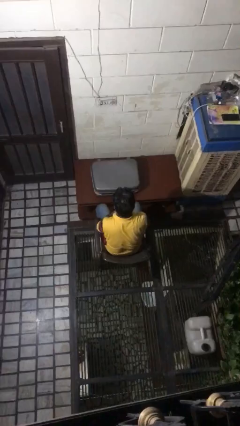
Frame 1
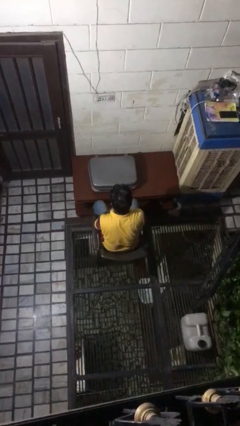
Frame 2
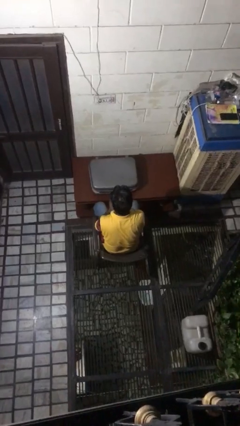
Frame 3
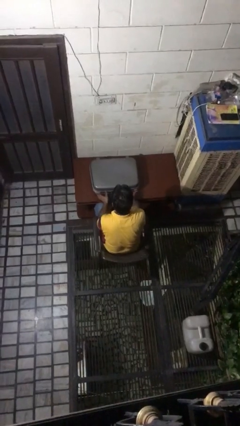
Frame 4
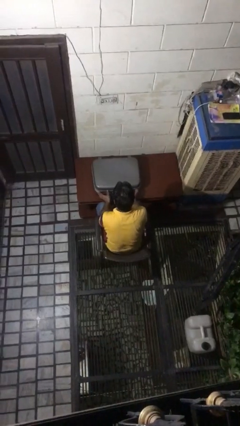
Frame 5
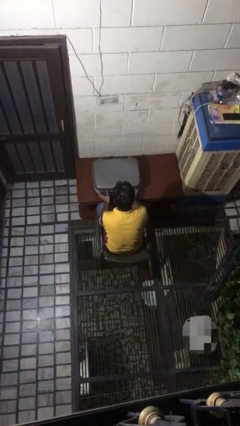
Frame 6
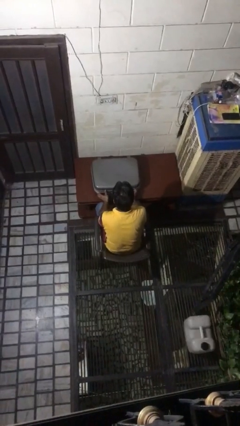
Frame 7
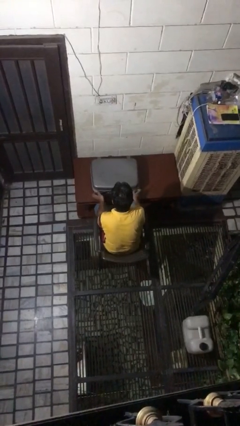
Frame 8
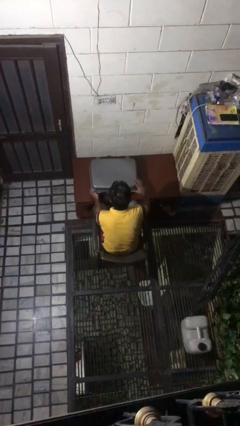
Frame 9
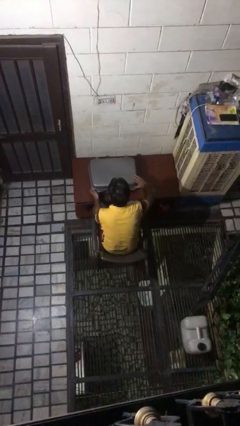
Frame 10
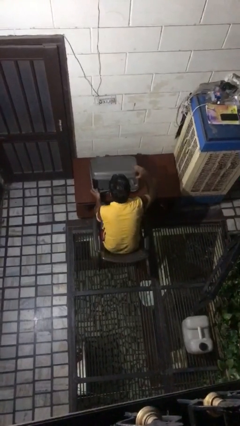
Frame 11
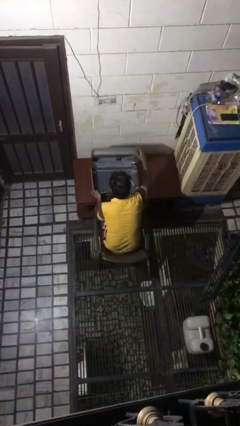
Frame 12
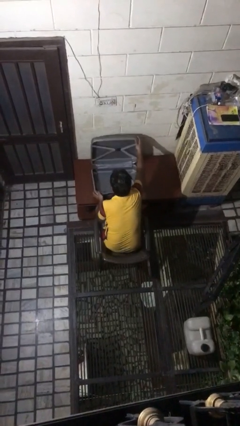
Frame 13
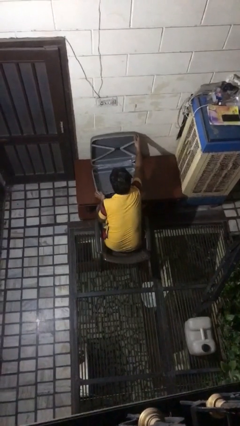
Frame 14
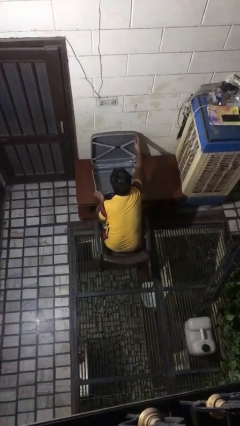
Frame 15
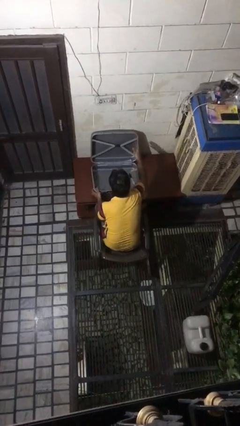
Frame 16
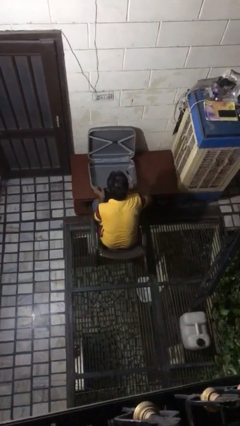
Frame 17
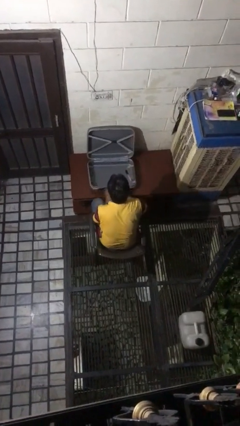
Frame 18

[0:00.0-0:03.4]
person opens suitcase

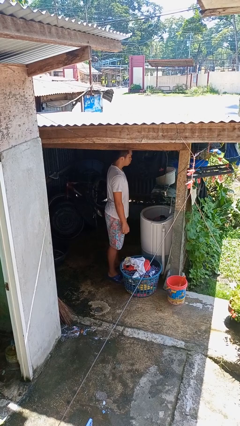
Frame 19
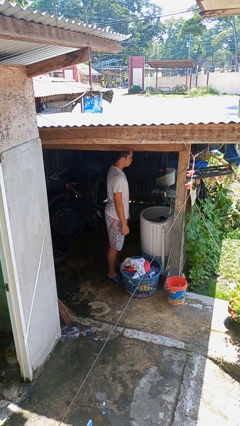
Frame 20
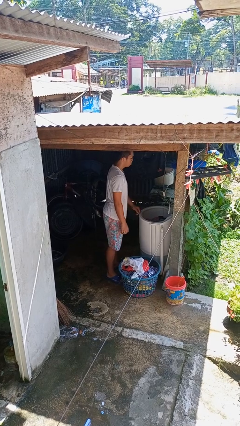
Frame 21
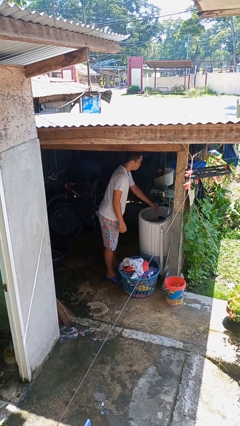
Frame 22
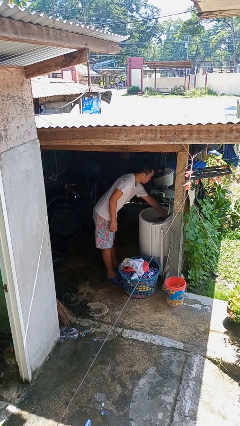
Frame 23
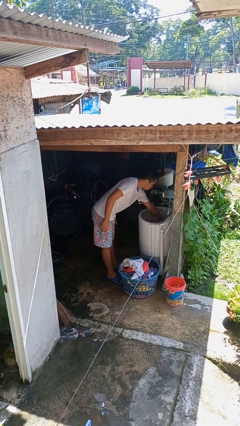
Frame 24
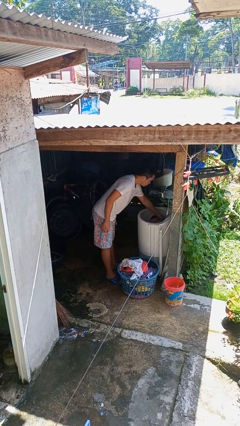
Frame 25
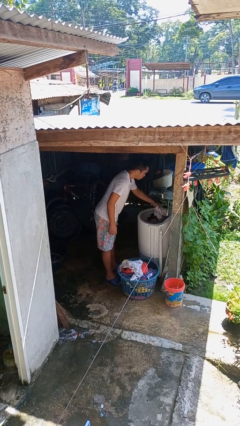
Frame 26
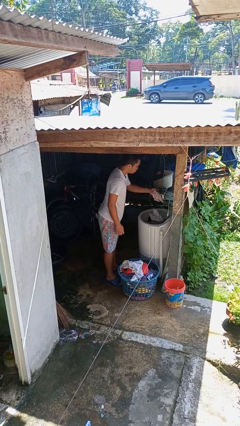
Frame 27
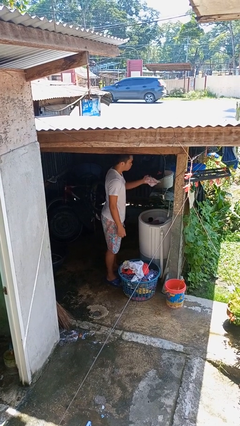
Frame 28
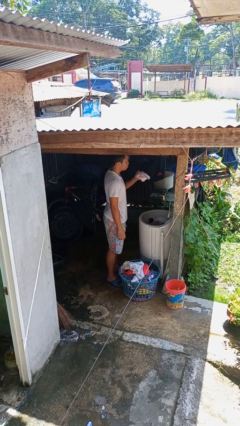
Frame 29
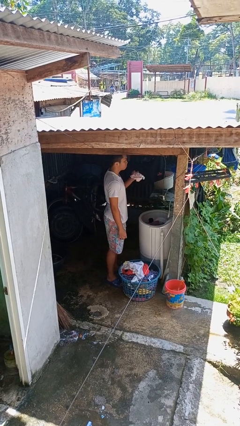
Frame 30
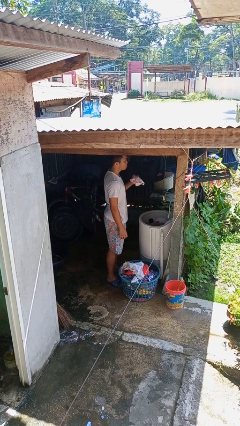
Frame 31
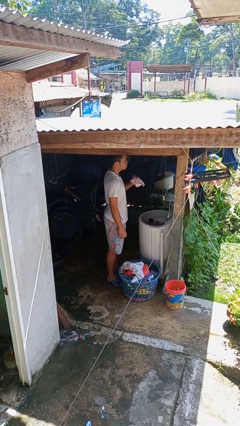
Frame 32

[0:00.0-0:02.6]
person unloads clotheswasher

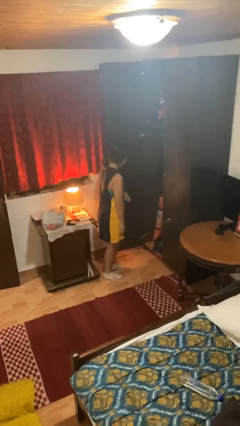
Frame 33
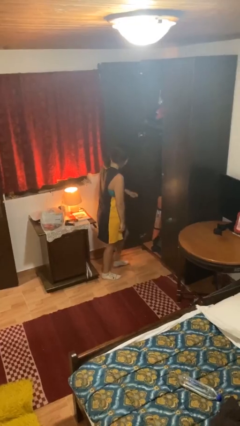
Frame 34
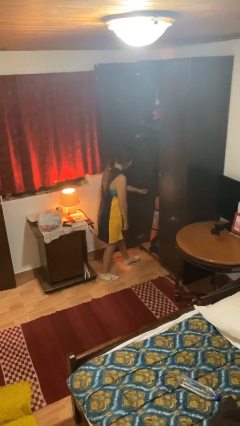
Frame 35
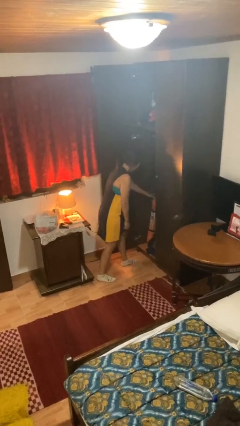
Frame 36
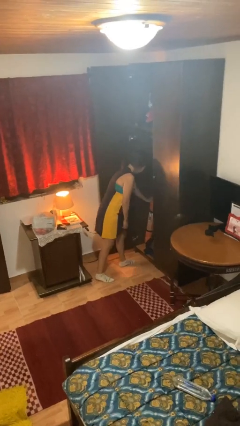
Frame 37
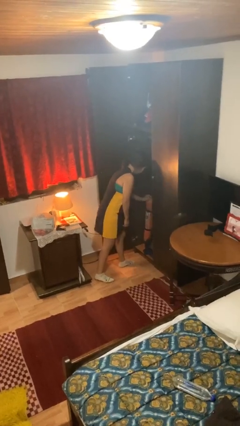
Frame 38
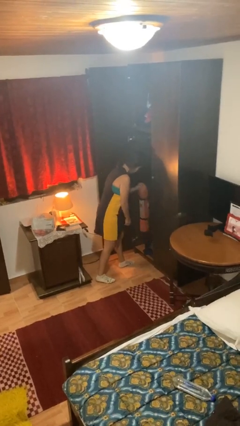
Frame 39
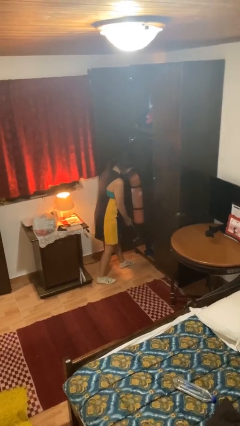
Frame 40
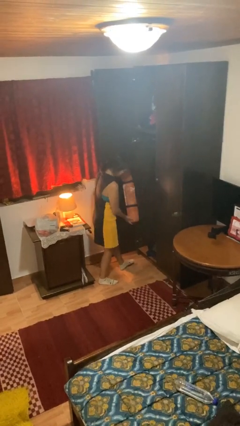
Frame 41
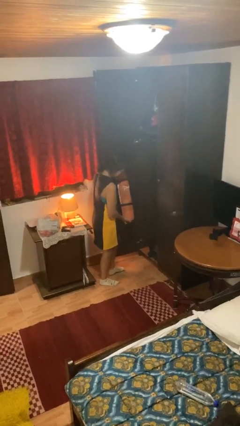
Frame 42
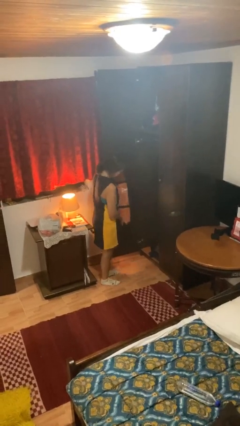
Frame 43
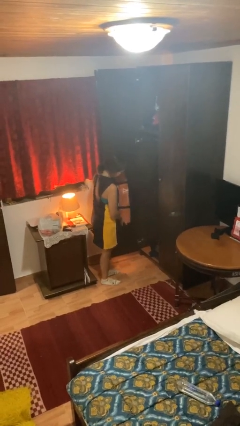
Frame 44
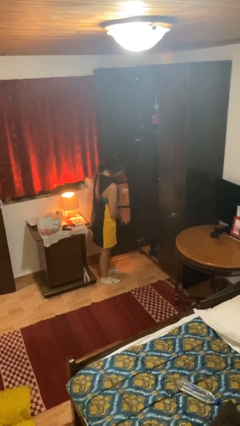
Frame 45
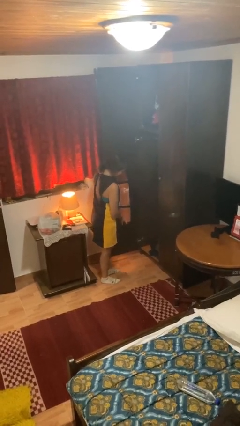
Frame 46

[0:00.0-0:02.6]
person picks up object from cabinet

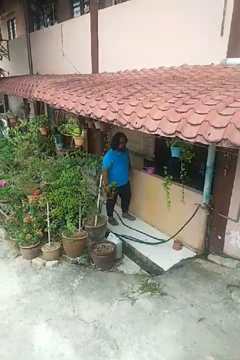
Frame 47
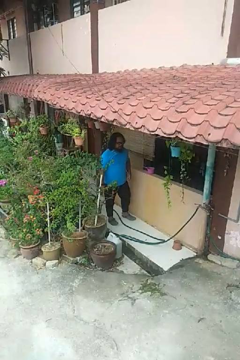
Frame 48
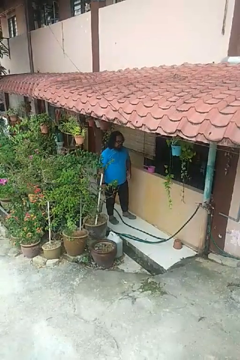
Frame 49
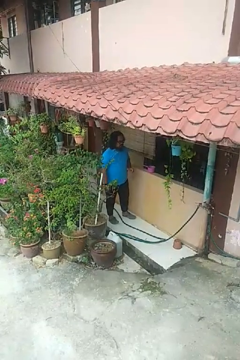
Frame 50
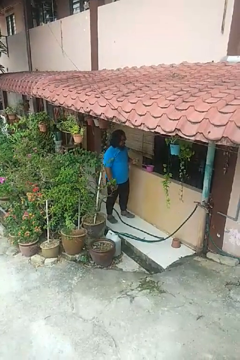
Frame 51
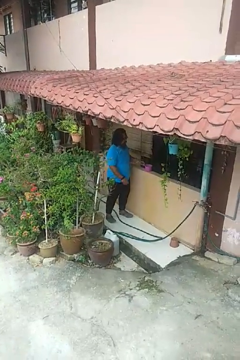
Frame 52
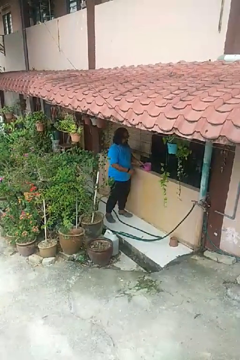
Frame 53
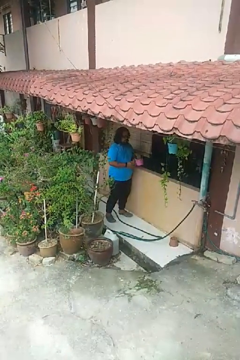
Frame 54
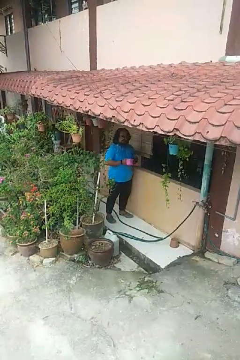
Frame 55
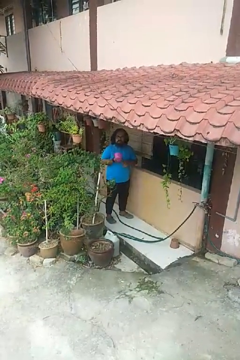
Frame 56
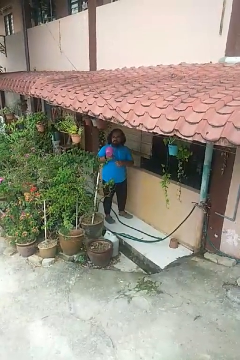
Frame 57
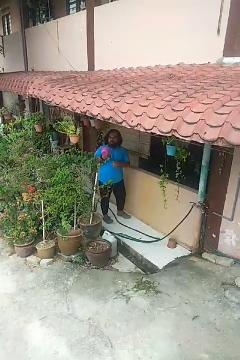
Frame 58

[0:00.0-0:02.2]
person picks up object from countertop

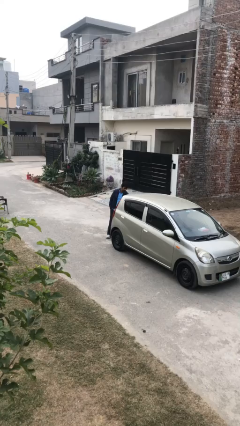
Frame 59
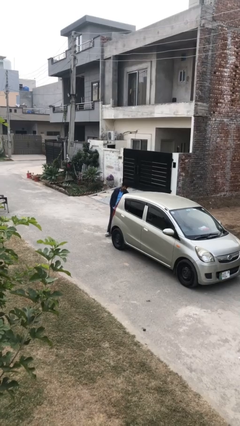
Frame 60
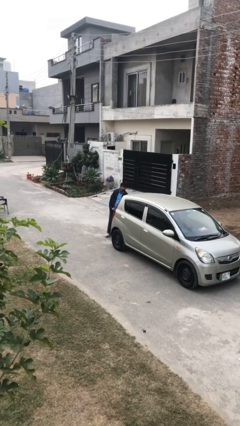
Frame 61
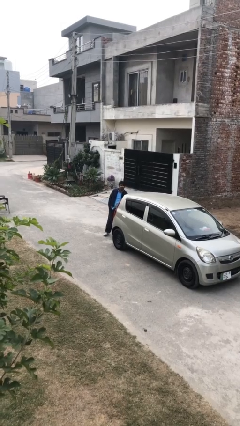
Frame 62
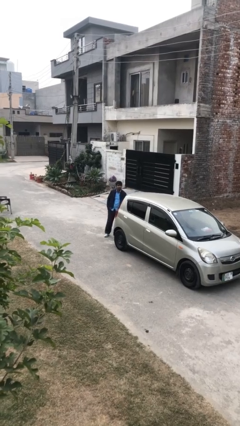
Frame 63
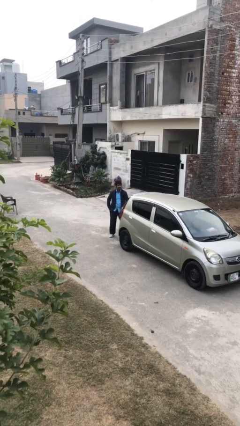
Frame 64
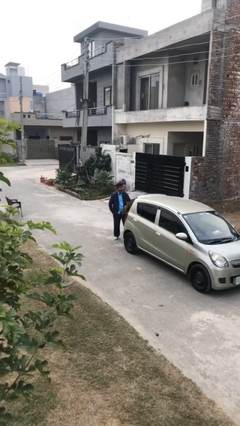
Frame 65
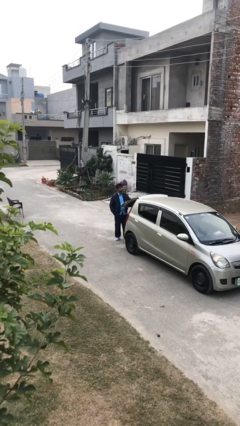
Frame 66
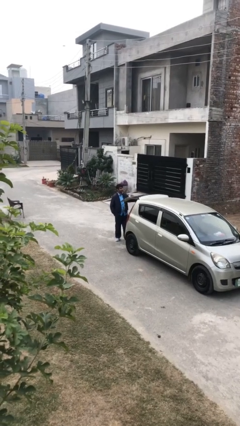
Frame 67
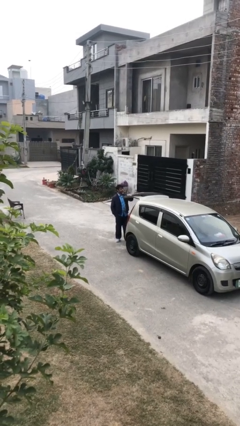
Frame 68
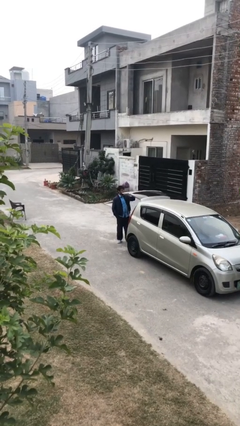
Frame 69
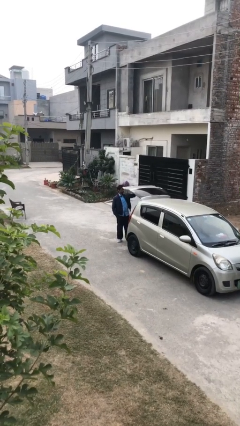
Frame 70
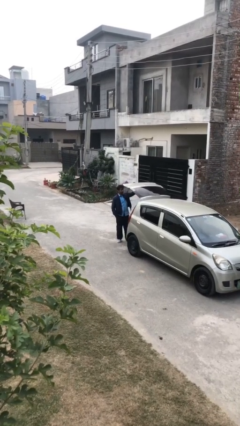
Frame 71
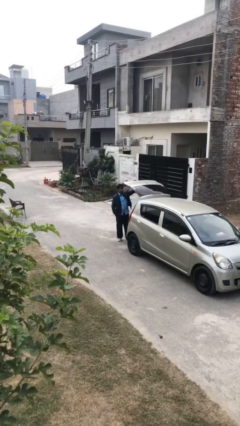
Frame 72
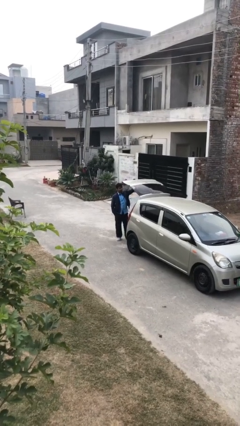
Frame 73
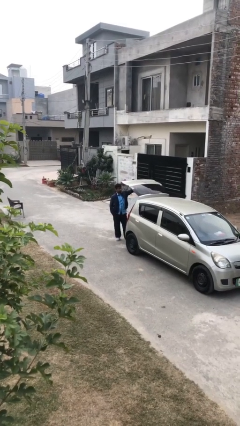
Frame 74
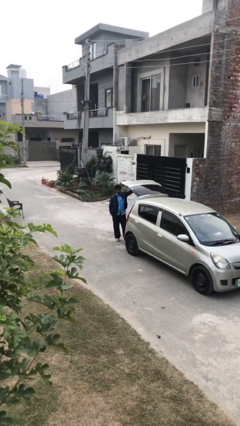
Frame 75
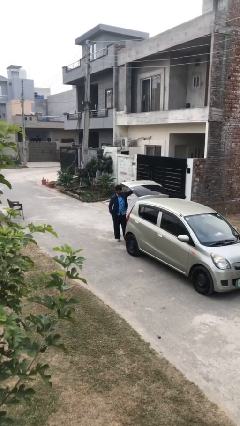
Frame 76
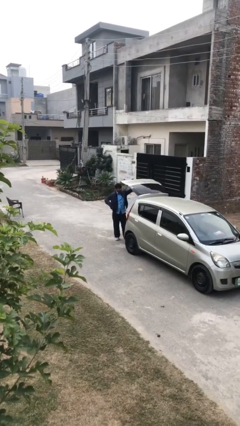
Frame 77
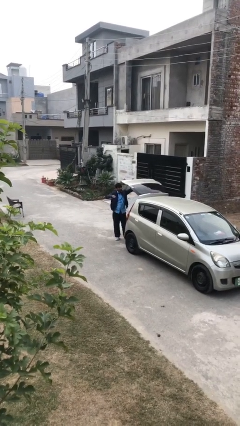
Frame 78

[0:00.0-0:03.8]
person opens car trunk

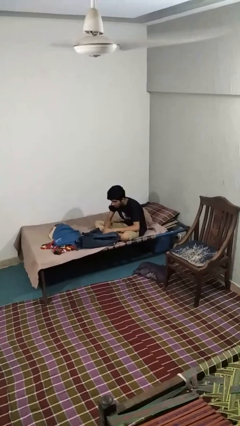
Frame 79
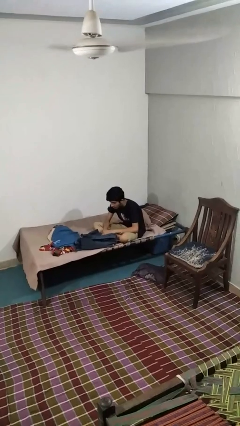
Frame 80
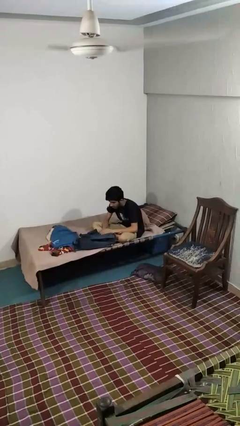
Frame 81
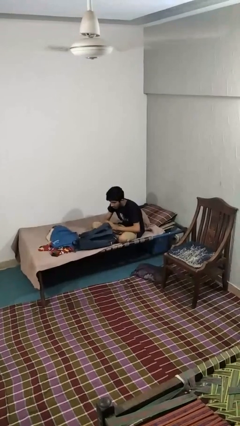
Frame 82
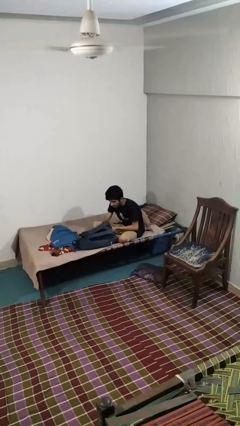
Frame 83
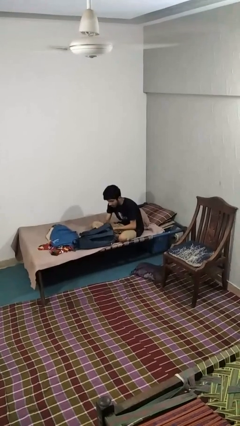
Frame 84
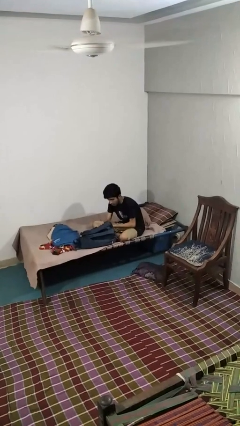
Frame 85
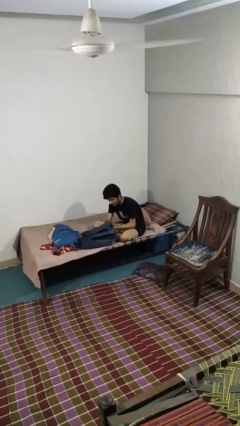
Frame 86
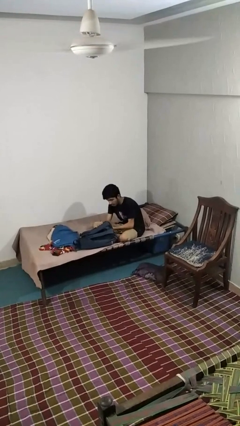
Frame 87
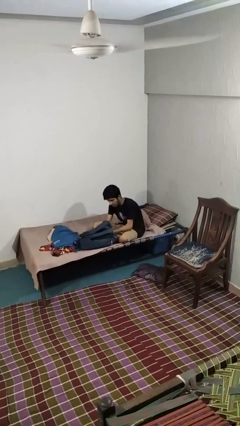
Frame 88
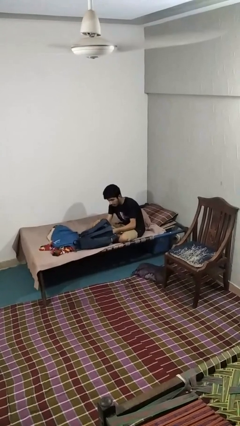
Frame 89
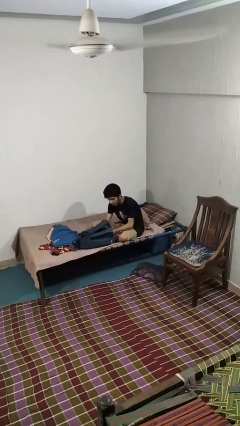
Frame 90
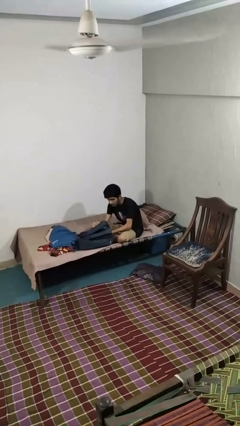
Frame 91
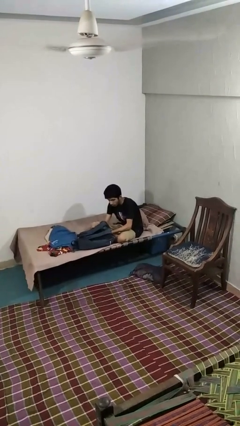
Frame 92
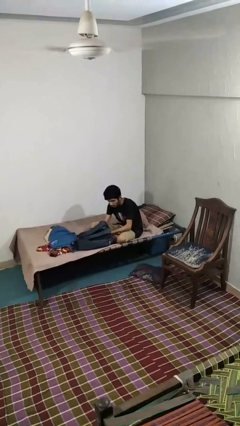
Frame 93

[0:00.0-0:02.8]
person searches in backpack

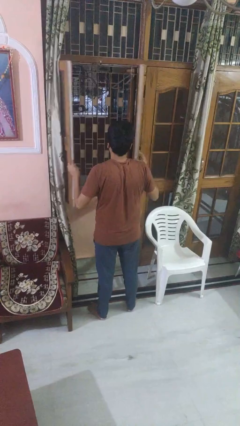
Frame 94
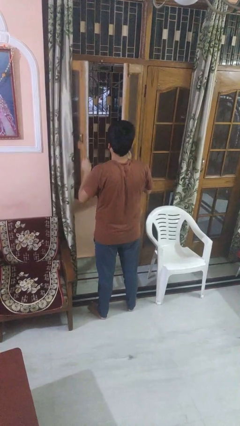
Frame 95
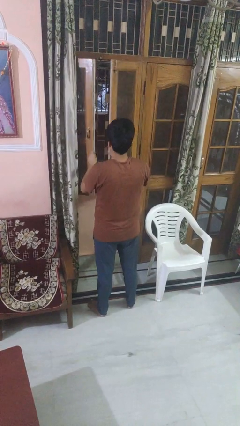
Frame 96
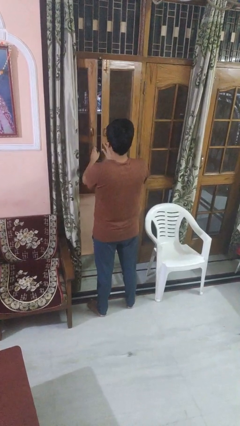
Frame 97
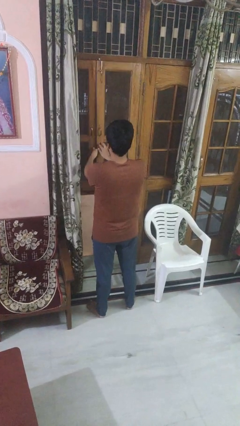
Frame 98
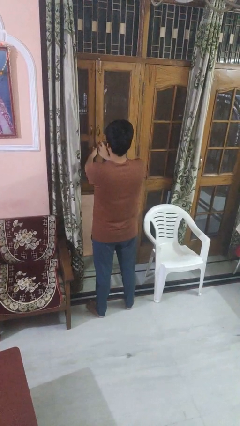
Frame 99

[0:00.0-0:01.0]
person closes home window
